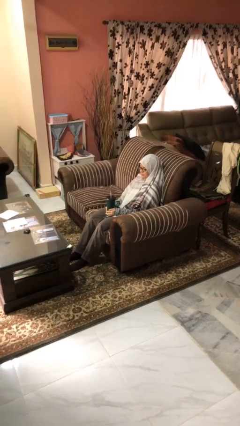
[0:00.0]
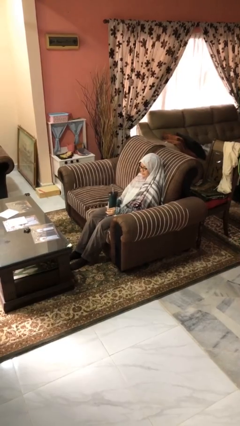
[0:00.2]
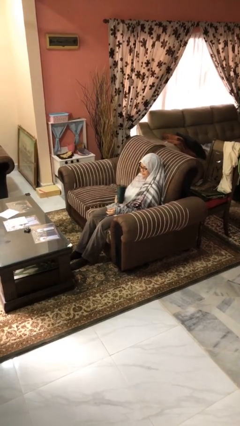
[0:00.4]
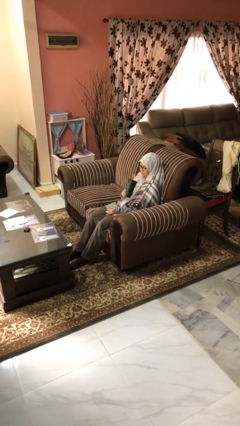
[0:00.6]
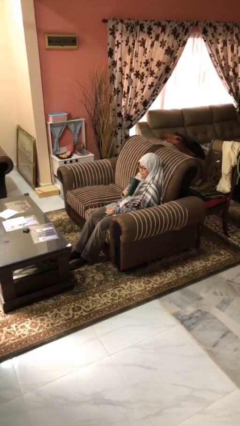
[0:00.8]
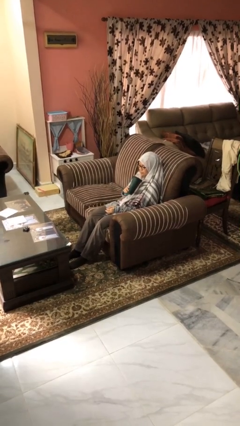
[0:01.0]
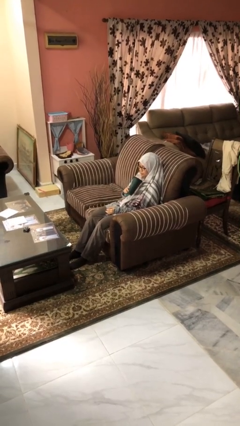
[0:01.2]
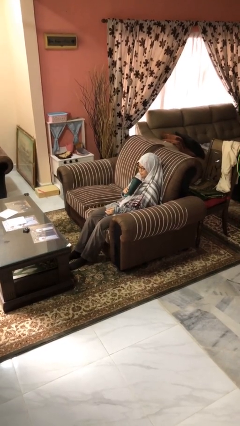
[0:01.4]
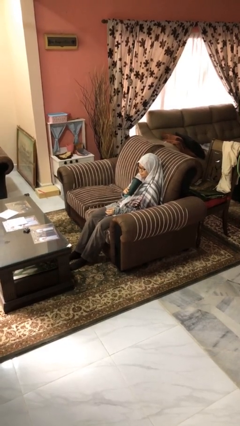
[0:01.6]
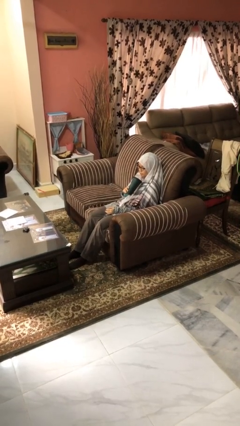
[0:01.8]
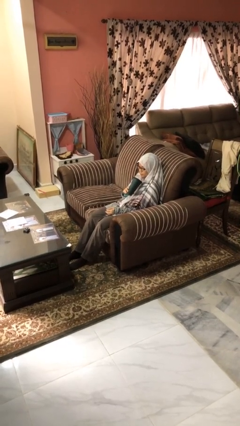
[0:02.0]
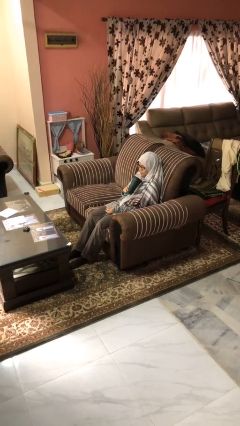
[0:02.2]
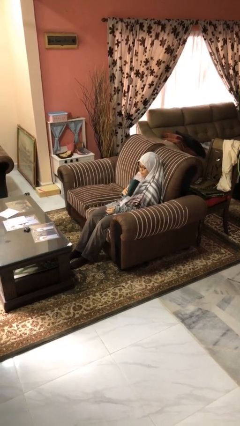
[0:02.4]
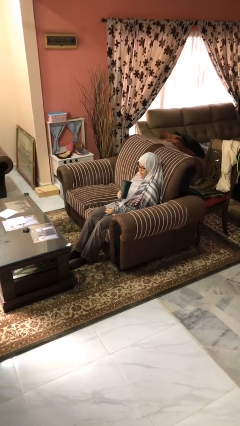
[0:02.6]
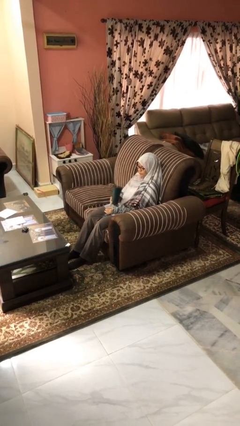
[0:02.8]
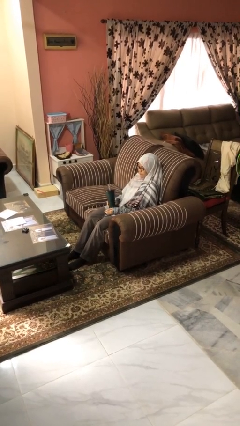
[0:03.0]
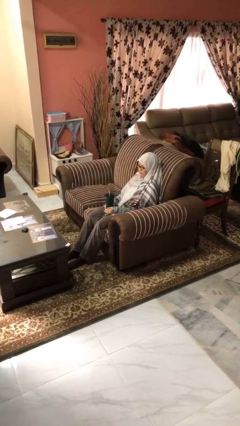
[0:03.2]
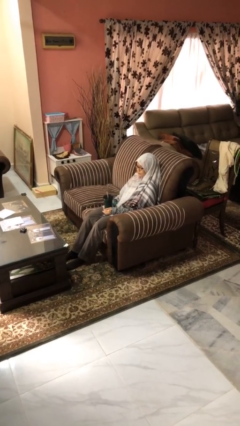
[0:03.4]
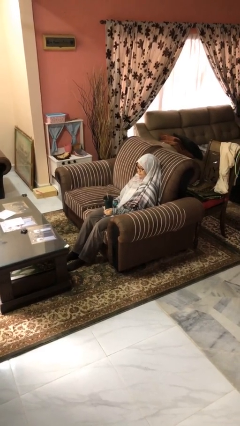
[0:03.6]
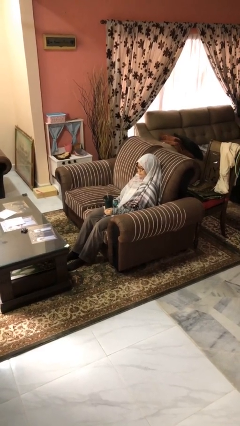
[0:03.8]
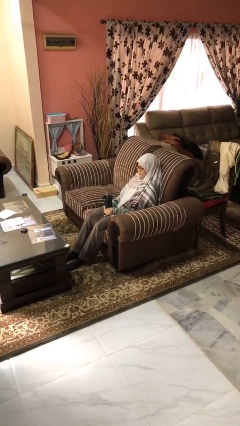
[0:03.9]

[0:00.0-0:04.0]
person drinks from straw

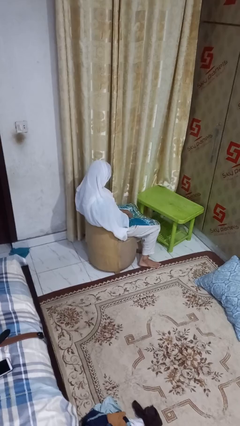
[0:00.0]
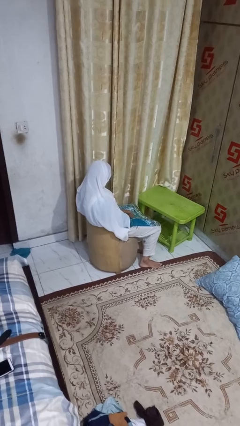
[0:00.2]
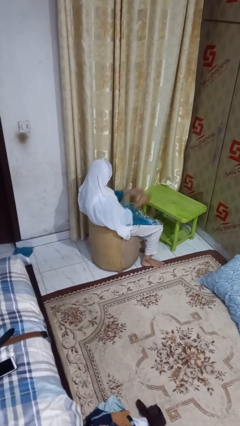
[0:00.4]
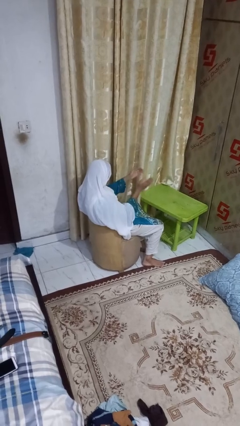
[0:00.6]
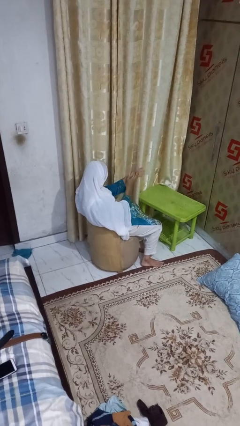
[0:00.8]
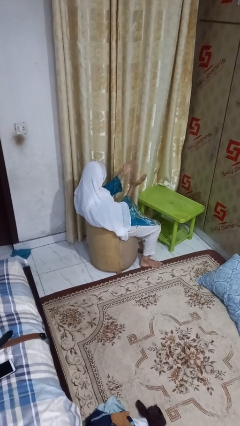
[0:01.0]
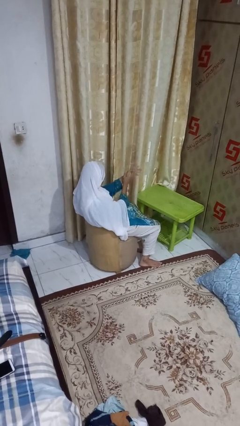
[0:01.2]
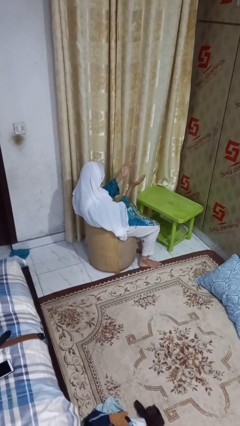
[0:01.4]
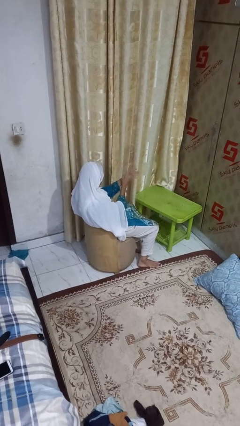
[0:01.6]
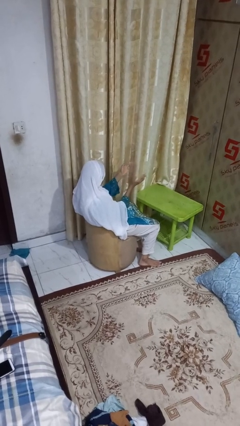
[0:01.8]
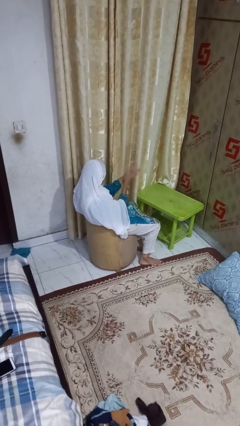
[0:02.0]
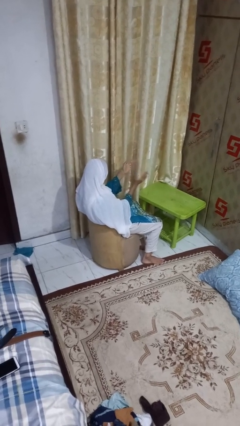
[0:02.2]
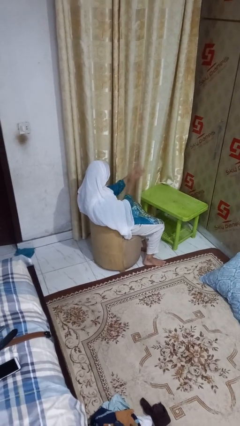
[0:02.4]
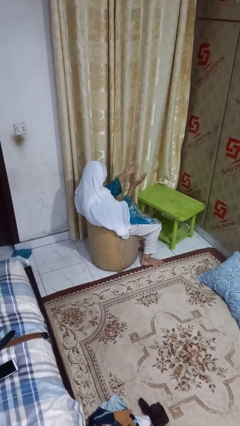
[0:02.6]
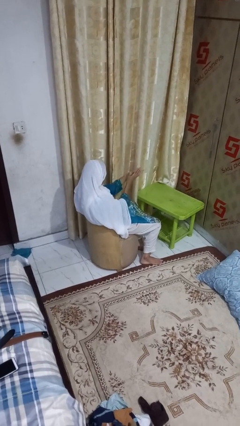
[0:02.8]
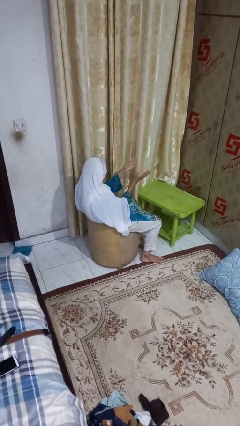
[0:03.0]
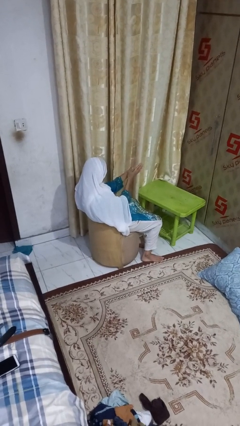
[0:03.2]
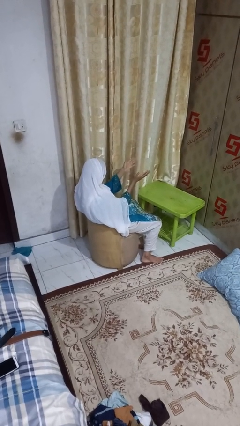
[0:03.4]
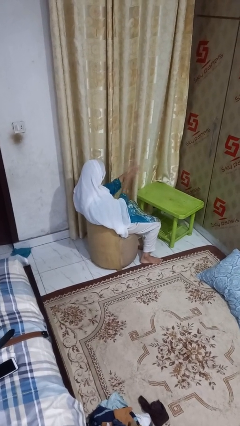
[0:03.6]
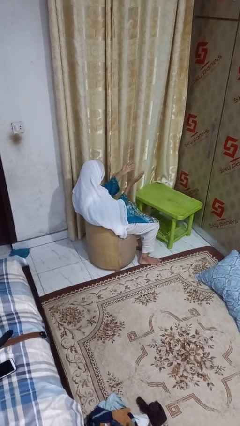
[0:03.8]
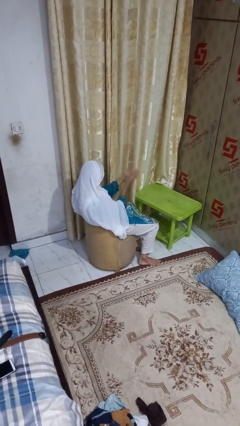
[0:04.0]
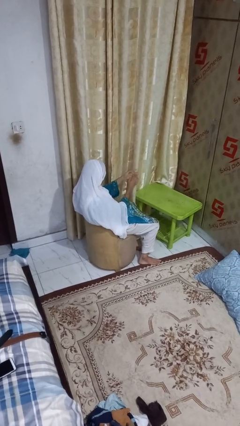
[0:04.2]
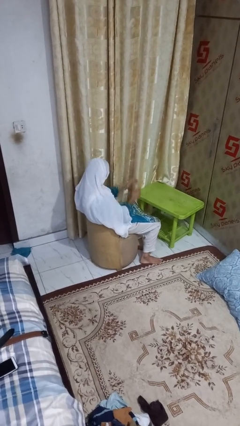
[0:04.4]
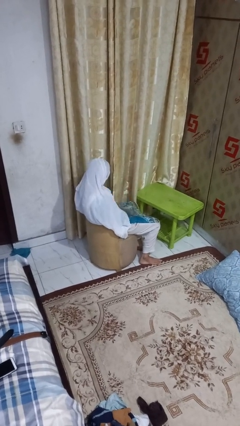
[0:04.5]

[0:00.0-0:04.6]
person claps hands

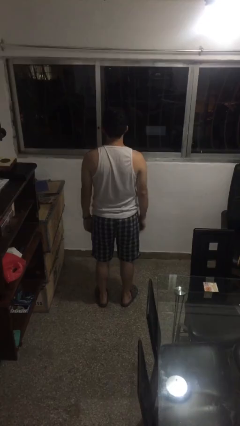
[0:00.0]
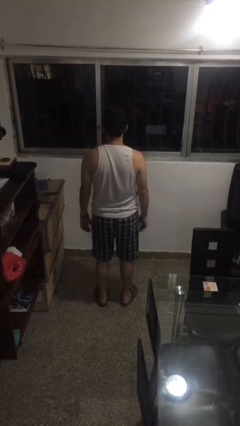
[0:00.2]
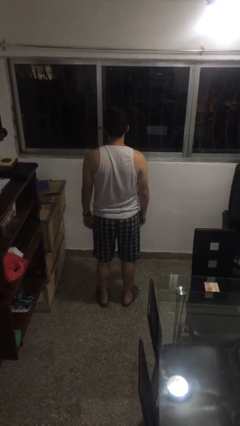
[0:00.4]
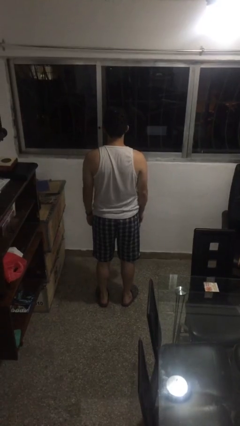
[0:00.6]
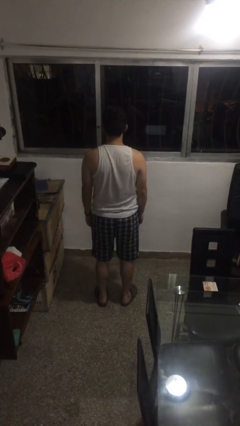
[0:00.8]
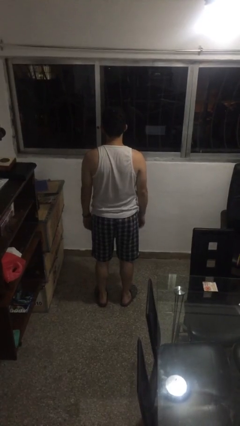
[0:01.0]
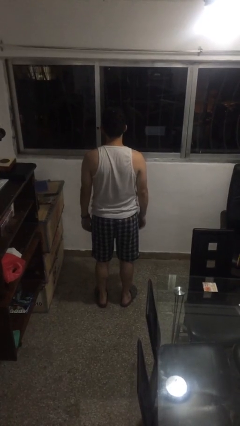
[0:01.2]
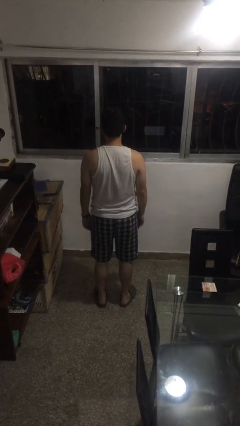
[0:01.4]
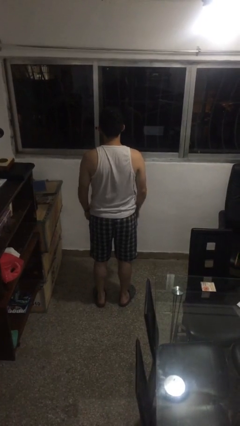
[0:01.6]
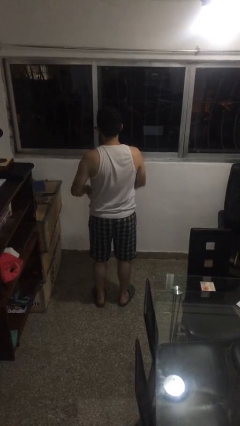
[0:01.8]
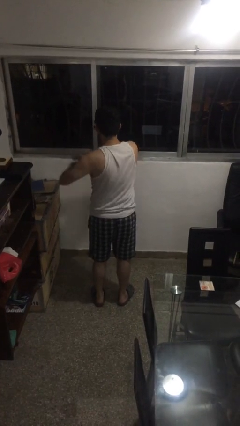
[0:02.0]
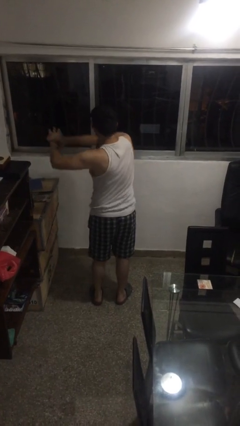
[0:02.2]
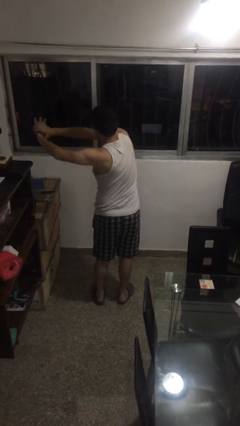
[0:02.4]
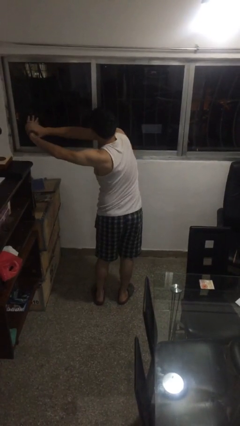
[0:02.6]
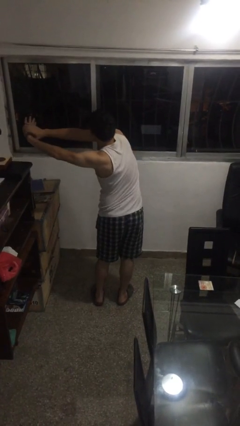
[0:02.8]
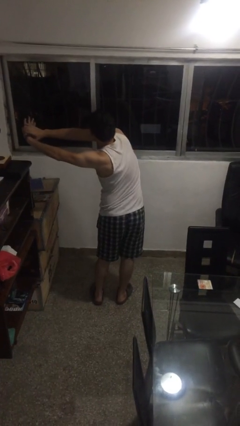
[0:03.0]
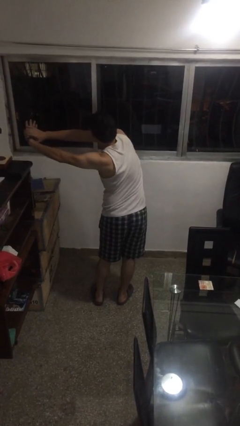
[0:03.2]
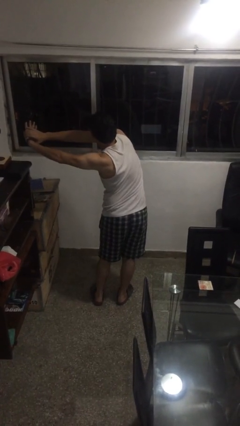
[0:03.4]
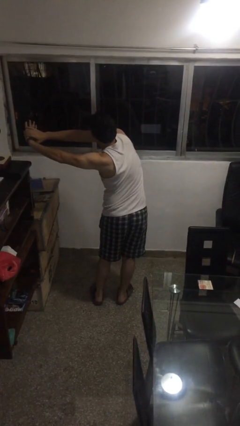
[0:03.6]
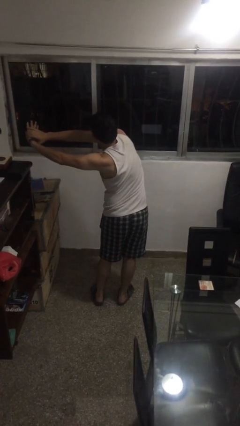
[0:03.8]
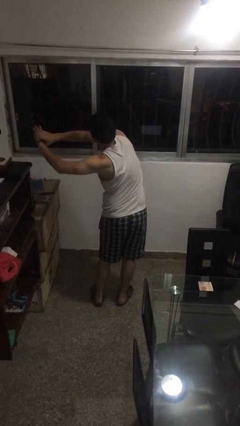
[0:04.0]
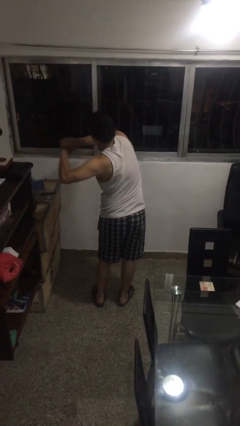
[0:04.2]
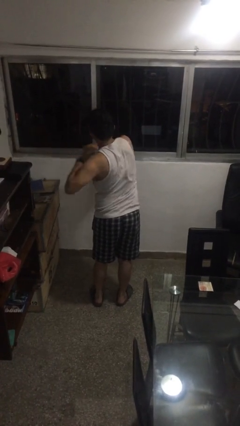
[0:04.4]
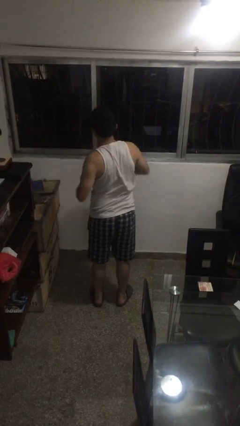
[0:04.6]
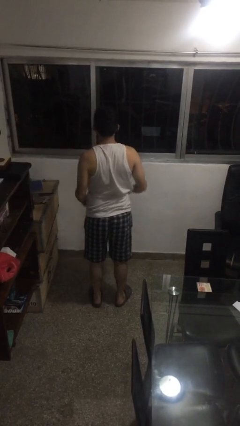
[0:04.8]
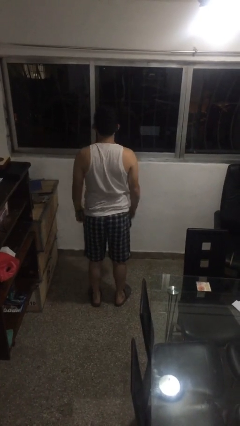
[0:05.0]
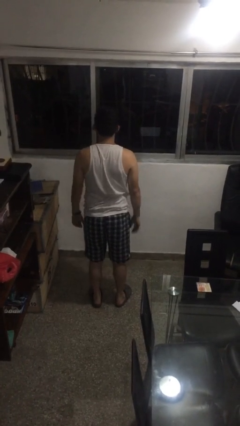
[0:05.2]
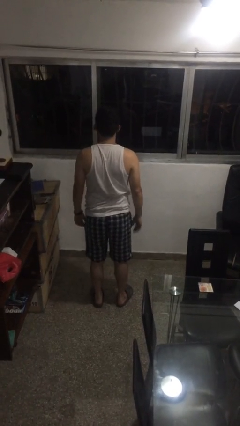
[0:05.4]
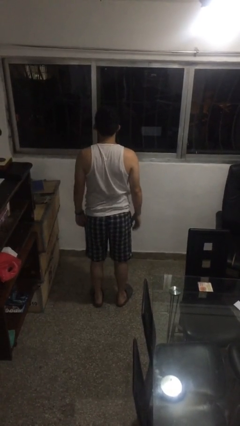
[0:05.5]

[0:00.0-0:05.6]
person stretches arms to side

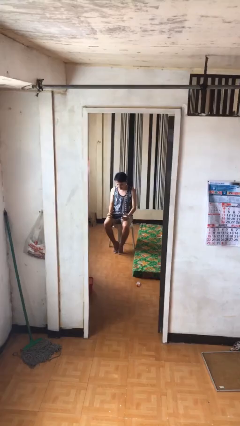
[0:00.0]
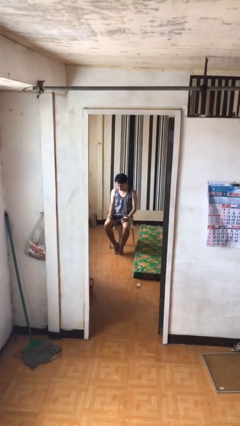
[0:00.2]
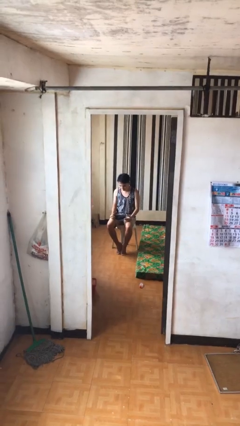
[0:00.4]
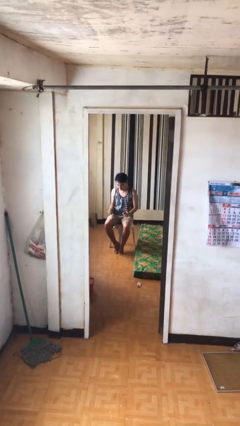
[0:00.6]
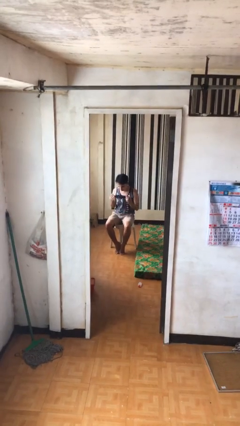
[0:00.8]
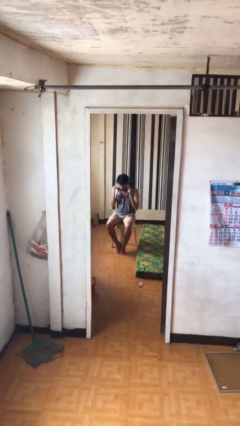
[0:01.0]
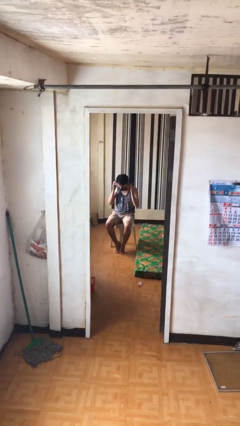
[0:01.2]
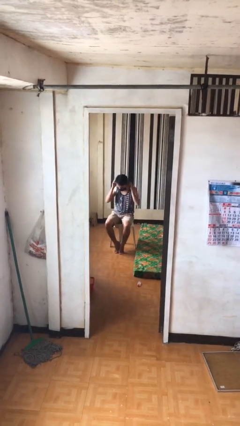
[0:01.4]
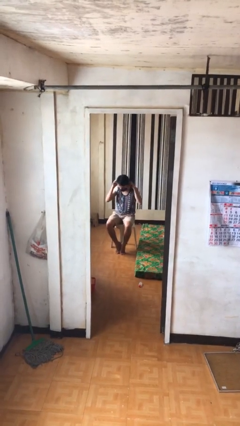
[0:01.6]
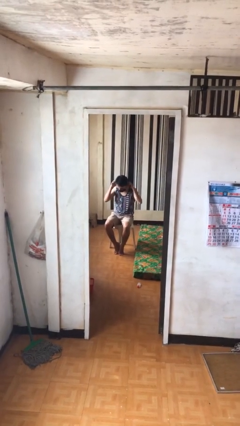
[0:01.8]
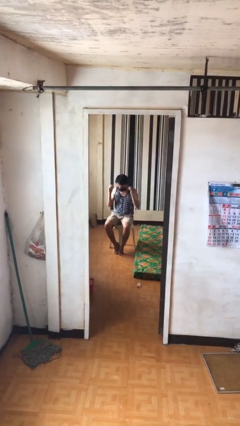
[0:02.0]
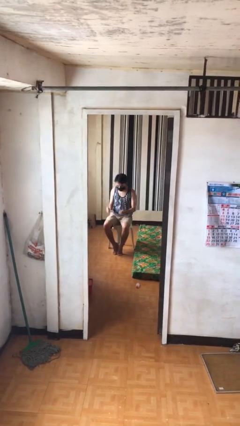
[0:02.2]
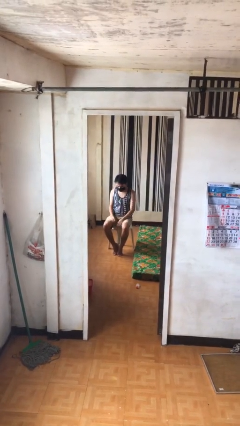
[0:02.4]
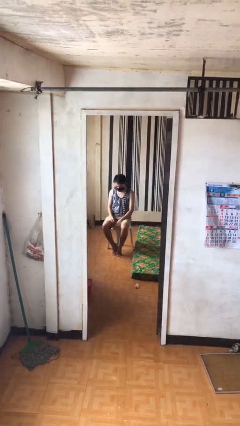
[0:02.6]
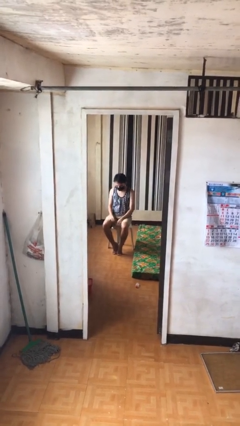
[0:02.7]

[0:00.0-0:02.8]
person puts on facemask

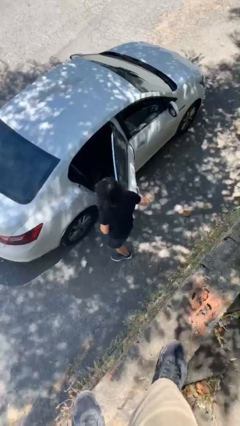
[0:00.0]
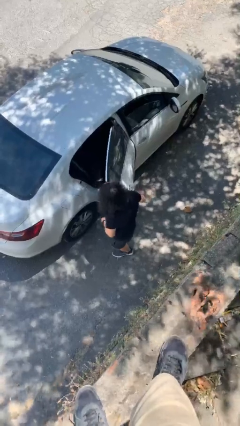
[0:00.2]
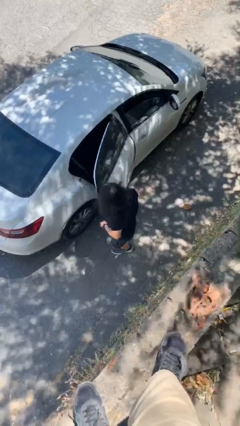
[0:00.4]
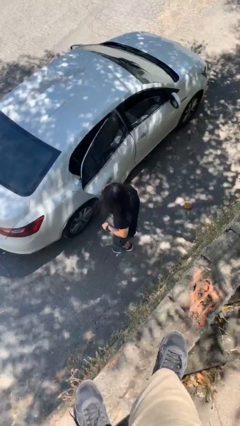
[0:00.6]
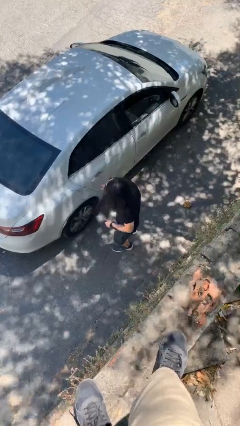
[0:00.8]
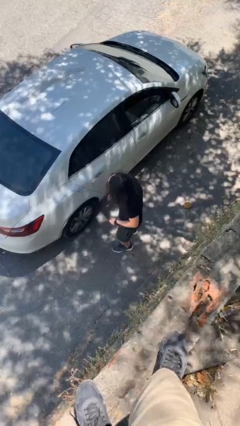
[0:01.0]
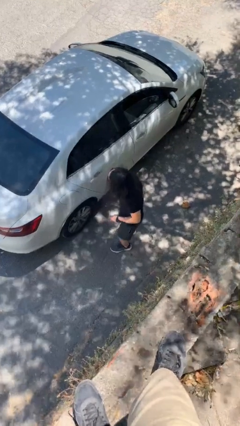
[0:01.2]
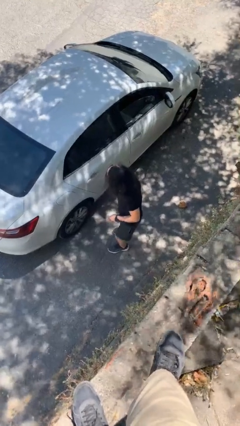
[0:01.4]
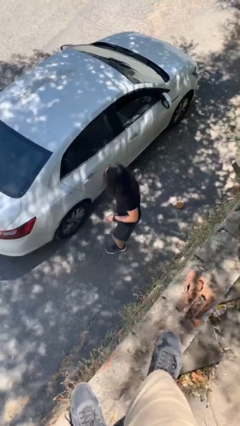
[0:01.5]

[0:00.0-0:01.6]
person closes car door
